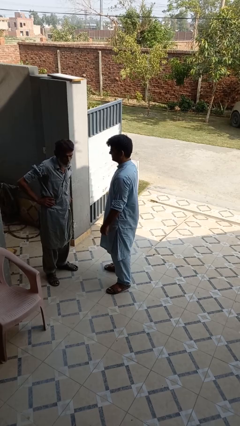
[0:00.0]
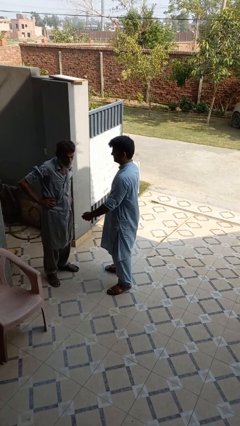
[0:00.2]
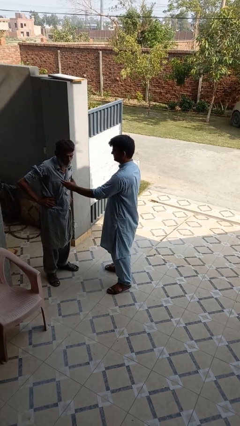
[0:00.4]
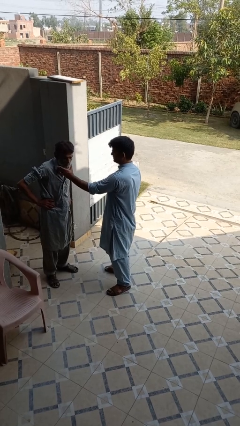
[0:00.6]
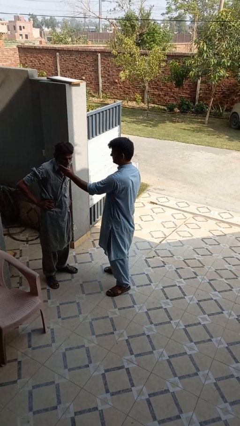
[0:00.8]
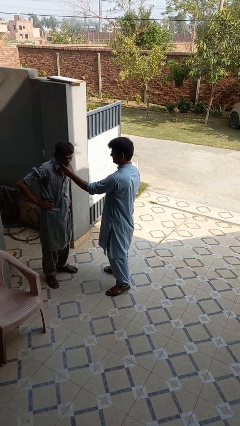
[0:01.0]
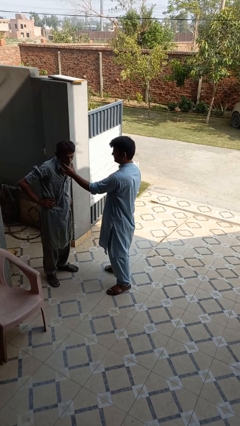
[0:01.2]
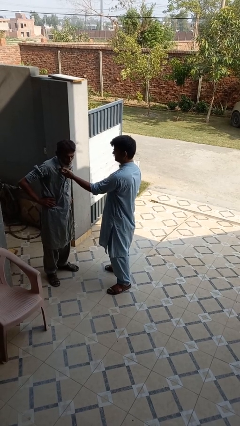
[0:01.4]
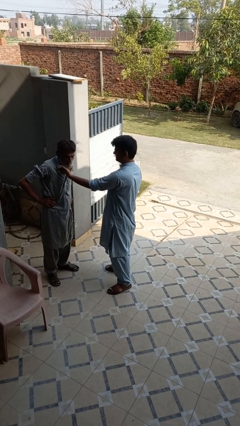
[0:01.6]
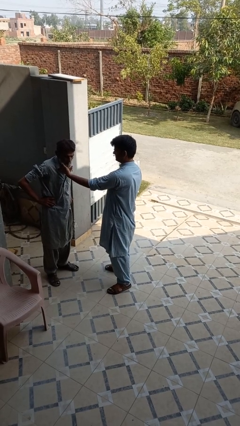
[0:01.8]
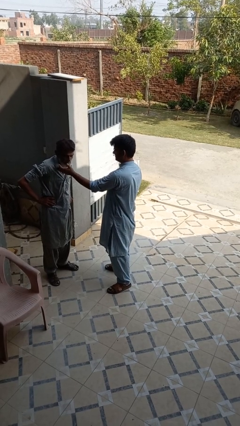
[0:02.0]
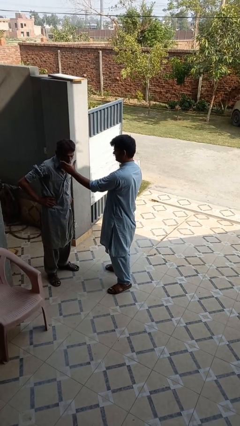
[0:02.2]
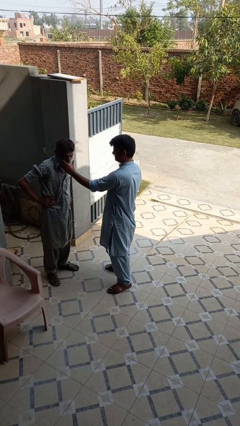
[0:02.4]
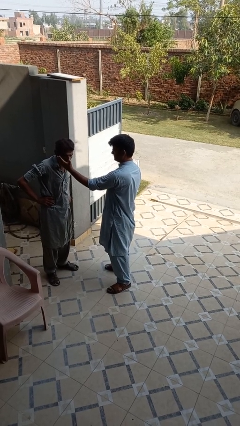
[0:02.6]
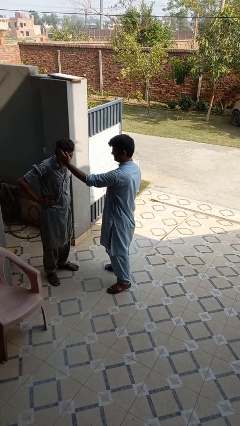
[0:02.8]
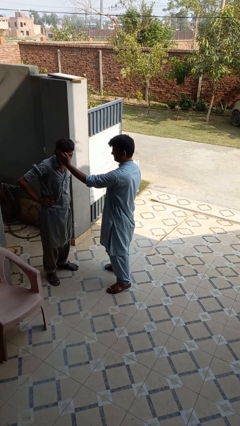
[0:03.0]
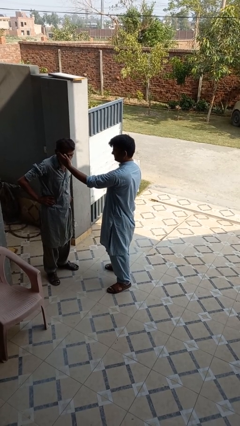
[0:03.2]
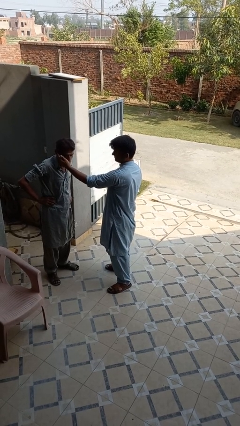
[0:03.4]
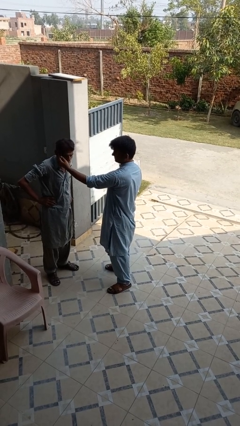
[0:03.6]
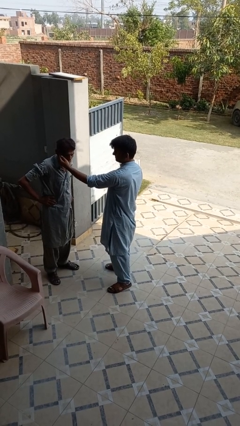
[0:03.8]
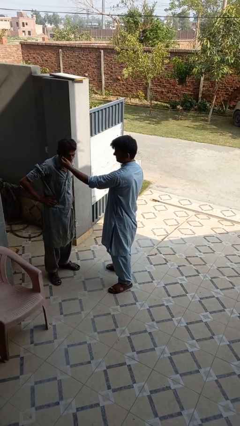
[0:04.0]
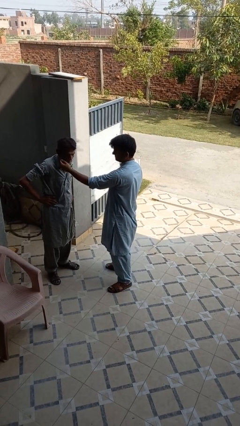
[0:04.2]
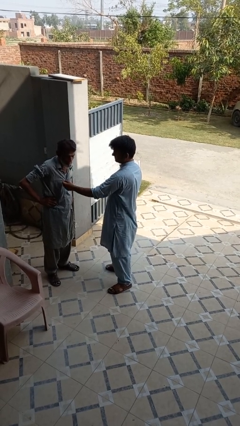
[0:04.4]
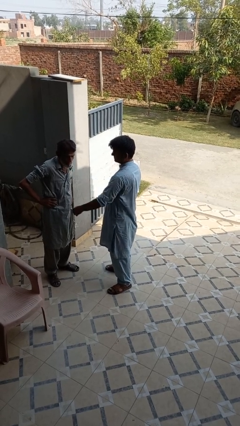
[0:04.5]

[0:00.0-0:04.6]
person touches face of person

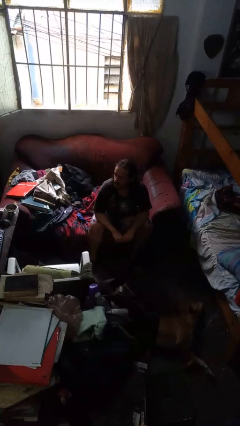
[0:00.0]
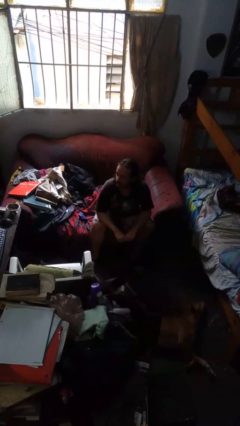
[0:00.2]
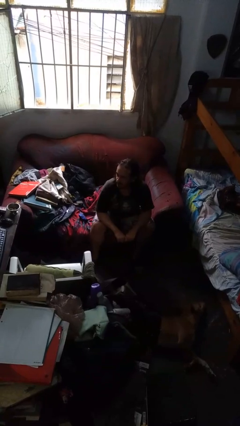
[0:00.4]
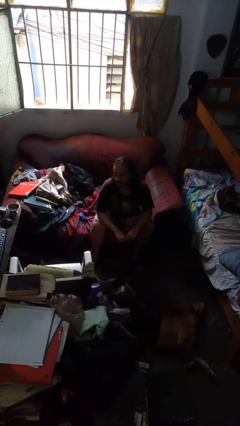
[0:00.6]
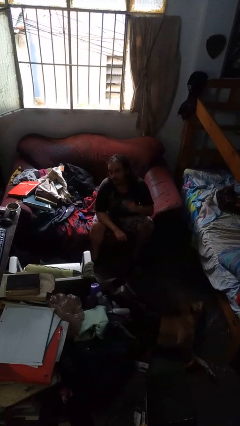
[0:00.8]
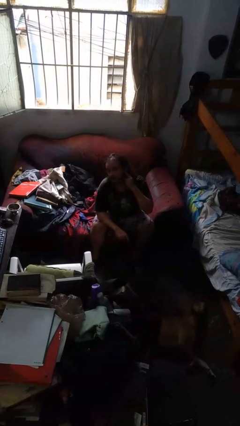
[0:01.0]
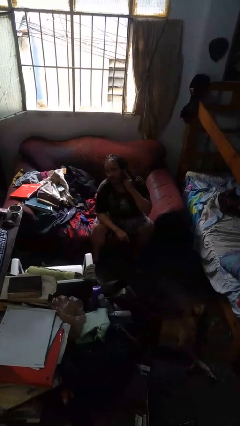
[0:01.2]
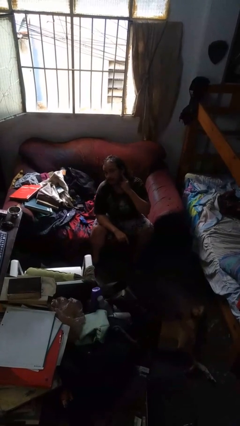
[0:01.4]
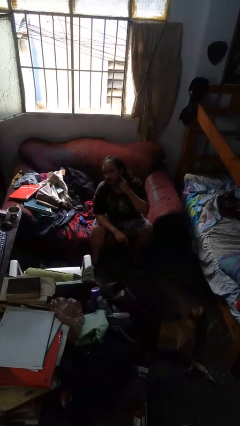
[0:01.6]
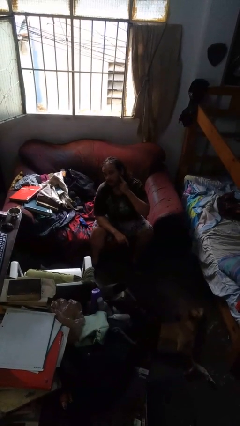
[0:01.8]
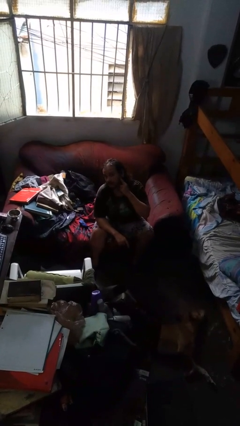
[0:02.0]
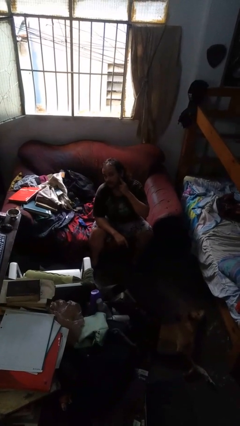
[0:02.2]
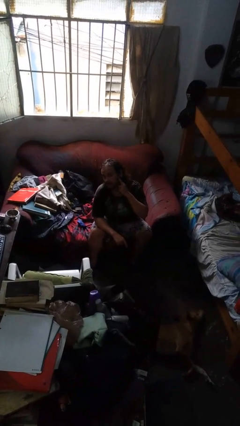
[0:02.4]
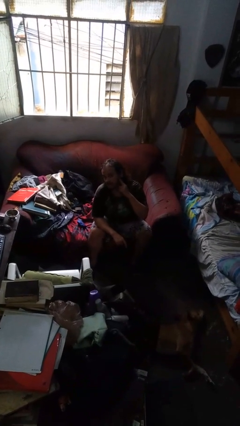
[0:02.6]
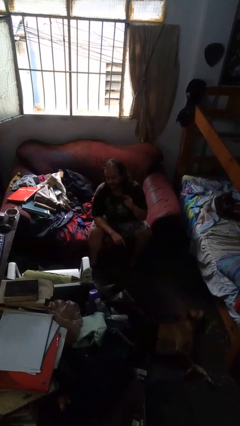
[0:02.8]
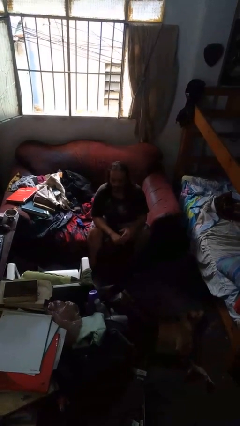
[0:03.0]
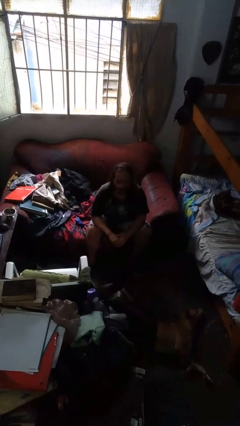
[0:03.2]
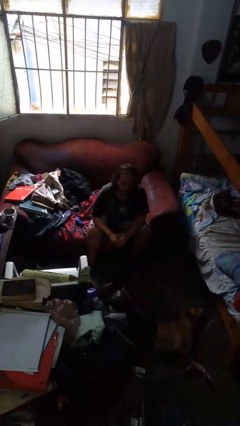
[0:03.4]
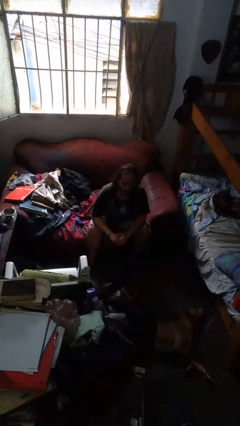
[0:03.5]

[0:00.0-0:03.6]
person gestures listen closely

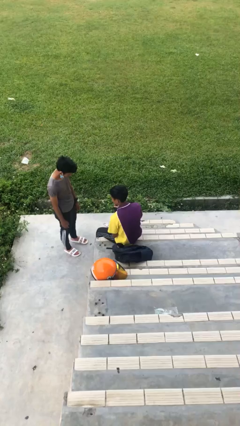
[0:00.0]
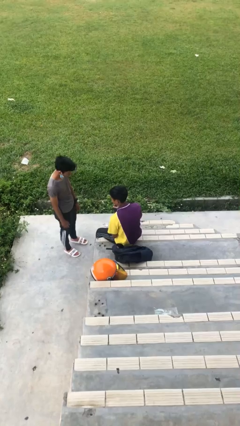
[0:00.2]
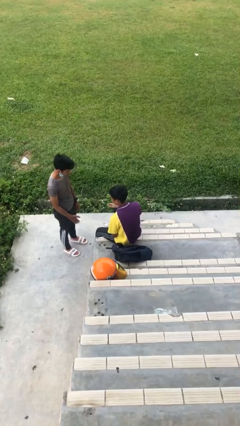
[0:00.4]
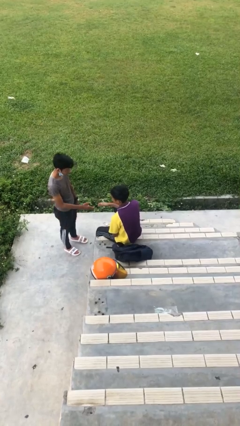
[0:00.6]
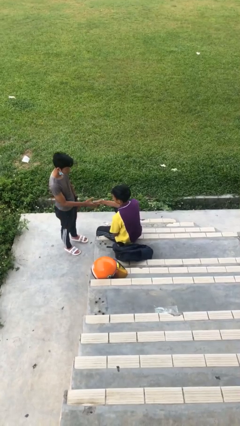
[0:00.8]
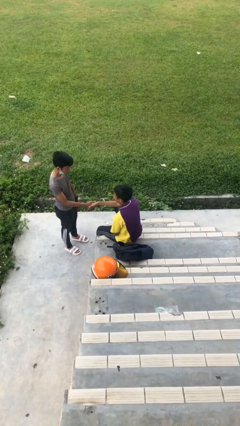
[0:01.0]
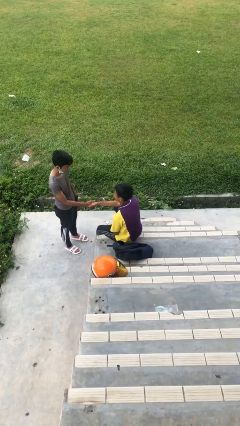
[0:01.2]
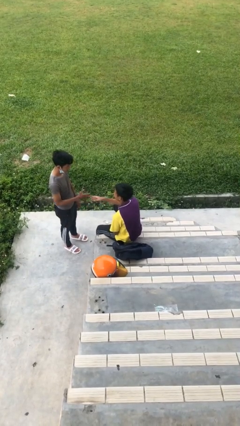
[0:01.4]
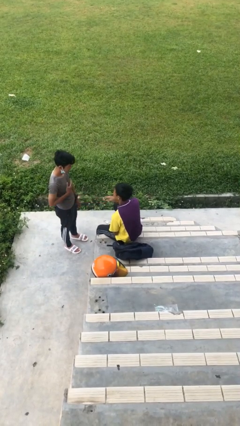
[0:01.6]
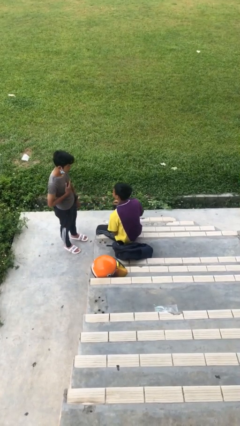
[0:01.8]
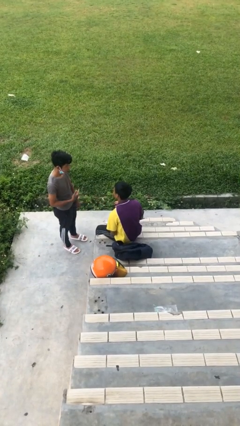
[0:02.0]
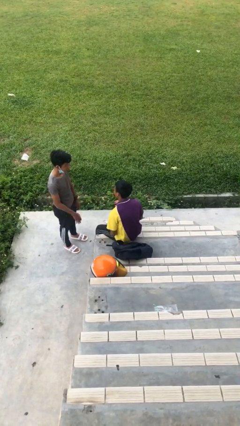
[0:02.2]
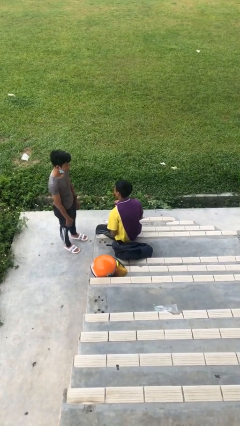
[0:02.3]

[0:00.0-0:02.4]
person shakes hand

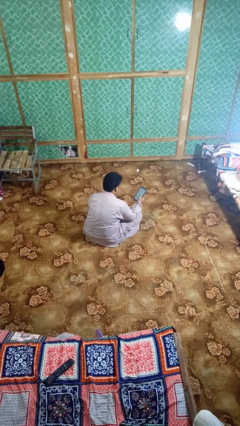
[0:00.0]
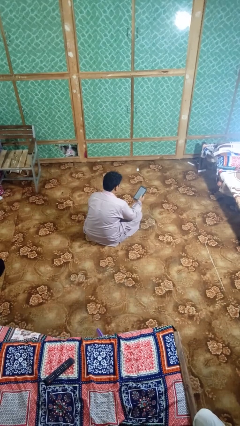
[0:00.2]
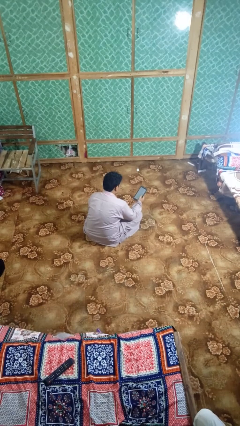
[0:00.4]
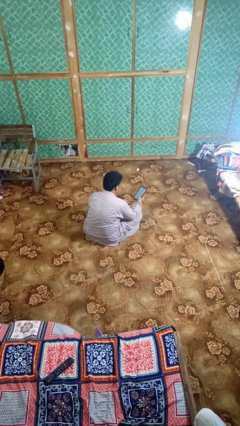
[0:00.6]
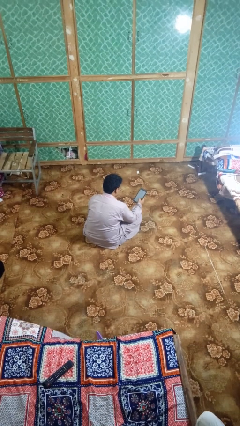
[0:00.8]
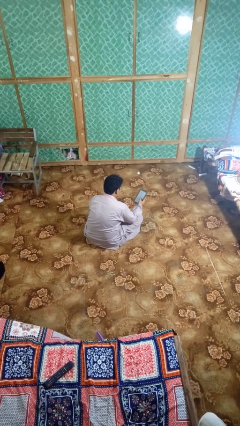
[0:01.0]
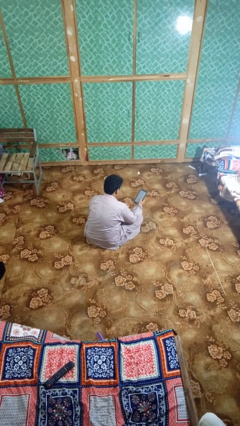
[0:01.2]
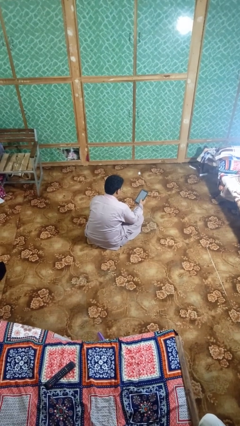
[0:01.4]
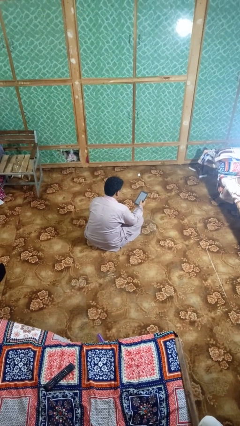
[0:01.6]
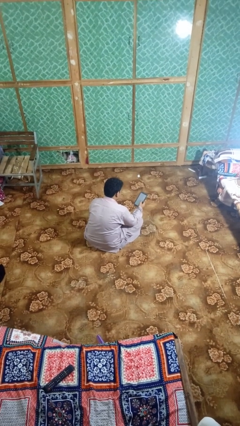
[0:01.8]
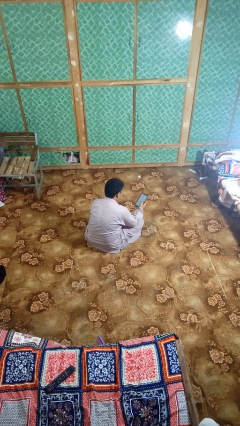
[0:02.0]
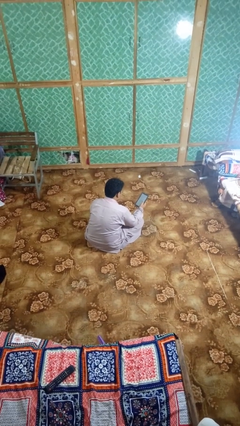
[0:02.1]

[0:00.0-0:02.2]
person interacts with tablet

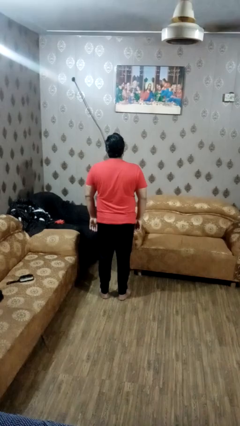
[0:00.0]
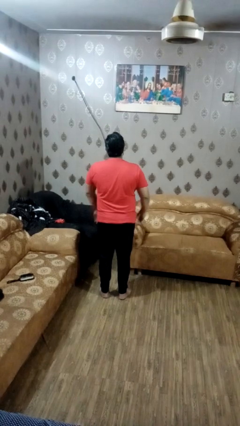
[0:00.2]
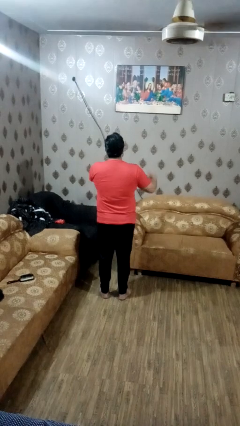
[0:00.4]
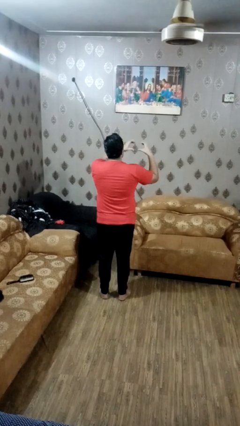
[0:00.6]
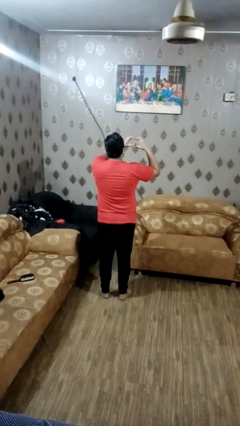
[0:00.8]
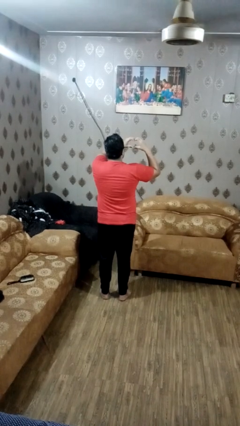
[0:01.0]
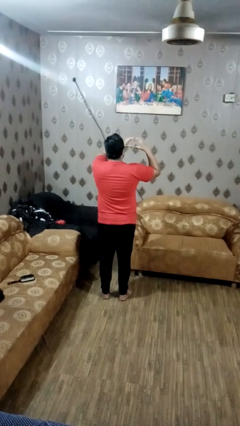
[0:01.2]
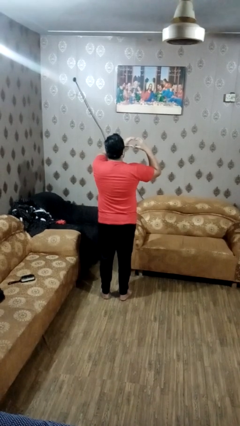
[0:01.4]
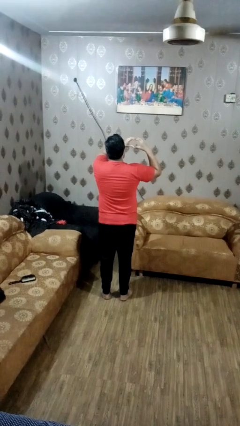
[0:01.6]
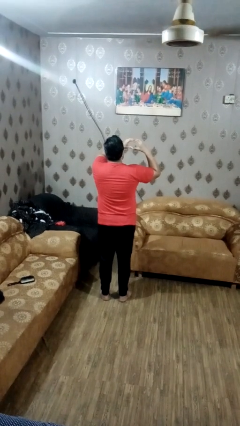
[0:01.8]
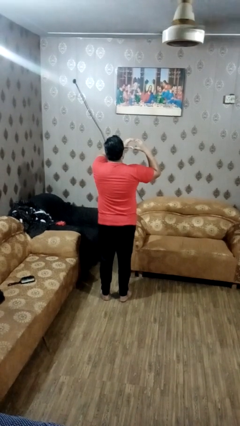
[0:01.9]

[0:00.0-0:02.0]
person gestures heart

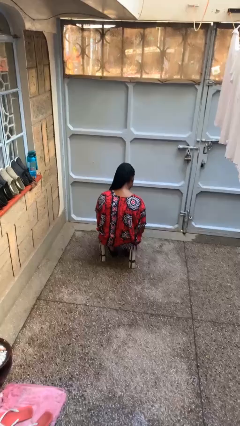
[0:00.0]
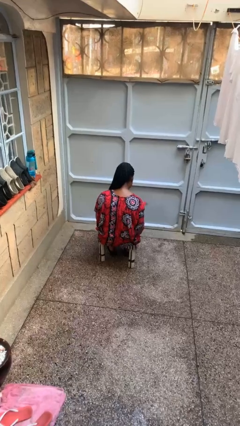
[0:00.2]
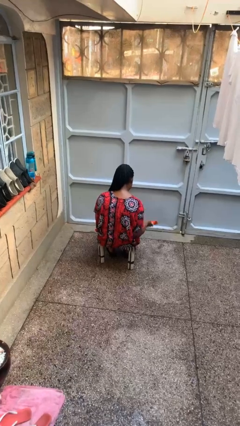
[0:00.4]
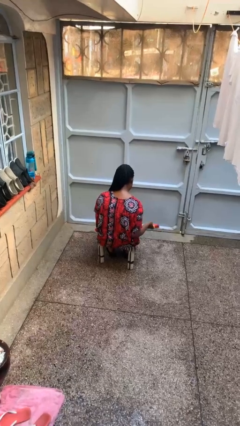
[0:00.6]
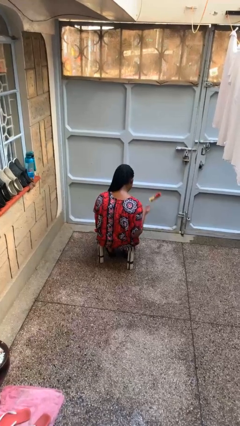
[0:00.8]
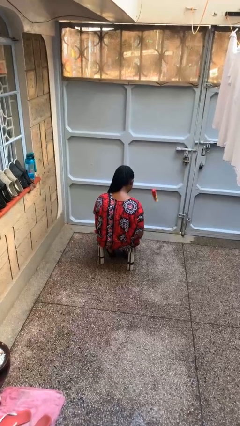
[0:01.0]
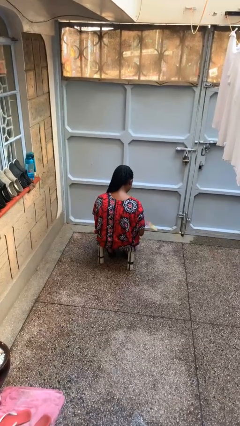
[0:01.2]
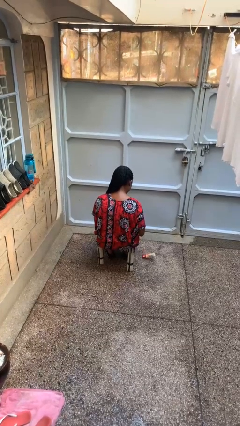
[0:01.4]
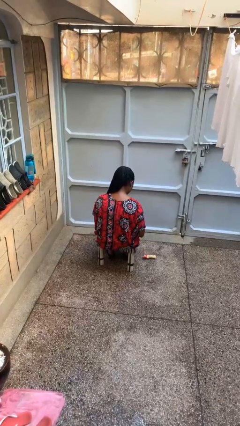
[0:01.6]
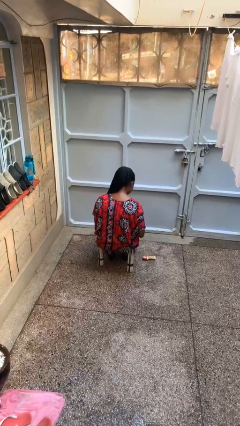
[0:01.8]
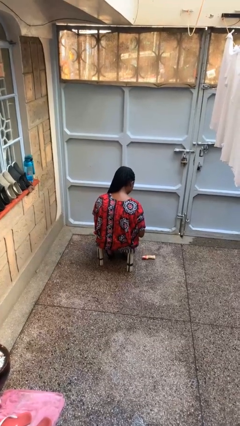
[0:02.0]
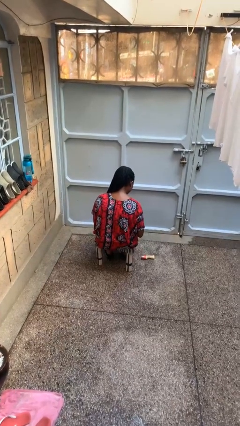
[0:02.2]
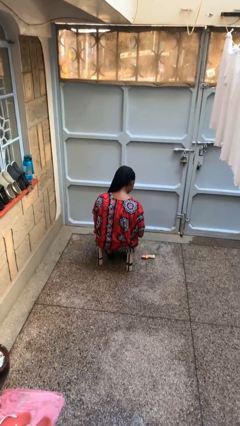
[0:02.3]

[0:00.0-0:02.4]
person throws object into air
